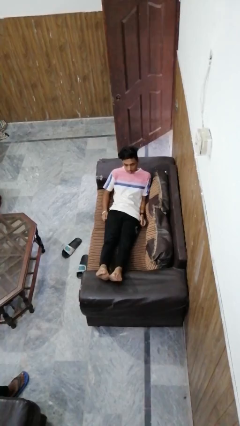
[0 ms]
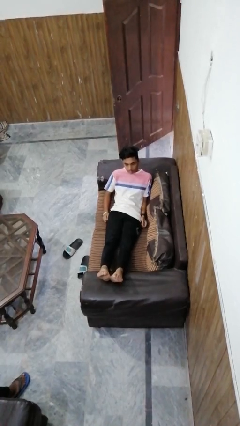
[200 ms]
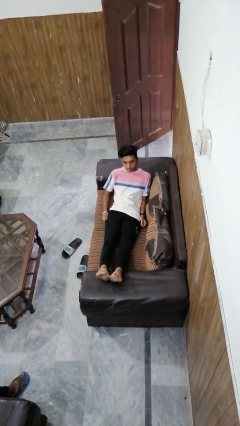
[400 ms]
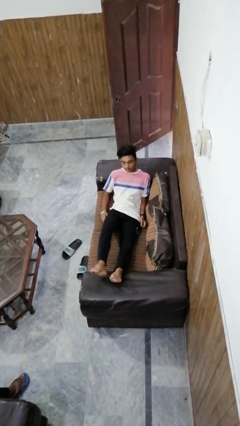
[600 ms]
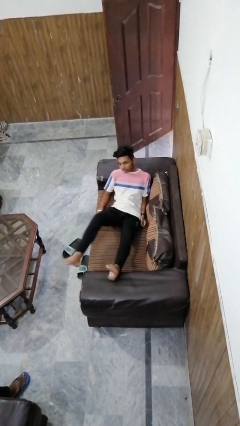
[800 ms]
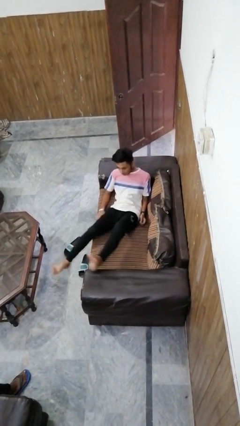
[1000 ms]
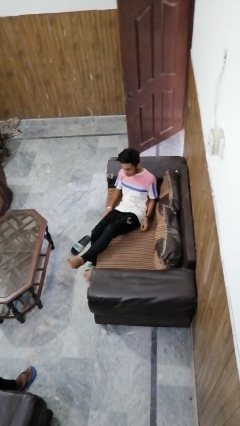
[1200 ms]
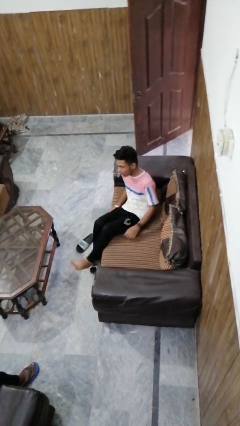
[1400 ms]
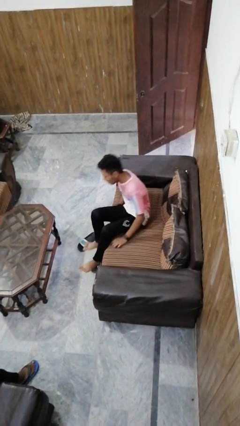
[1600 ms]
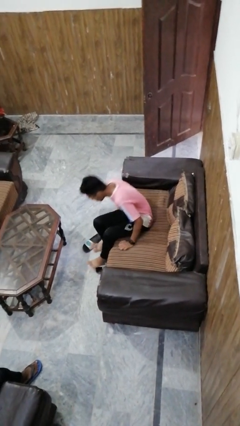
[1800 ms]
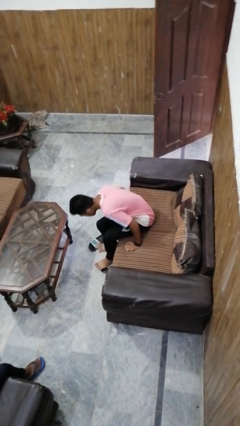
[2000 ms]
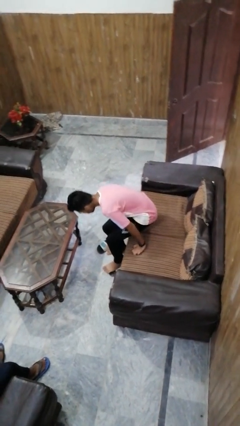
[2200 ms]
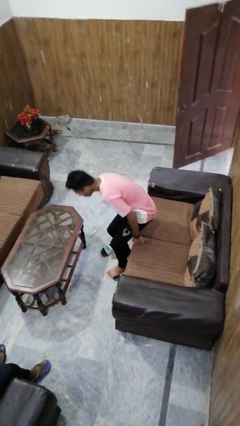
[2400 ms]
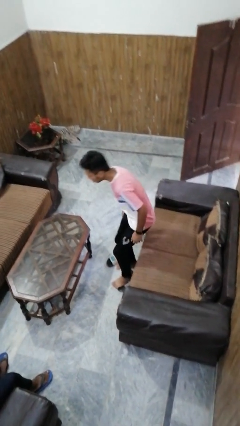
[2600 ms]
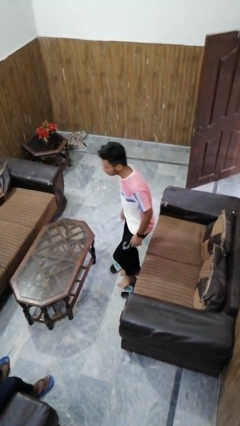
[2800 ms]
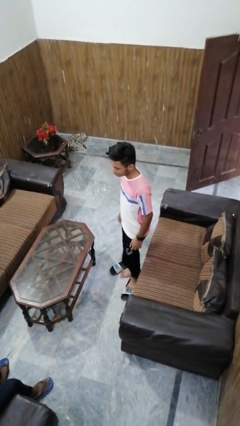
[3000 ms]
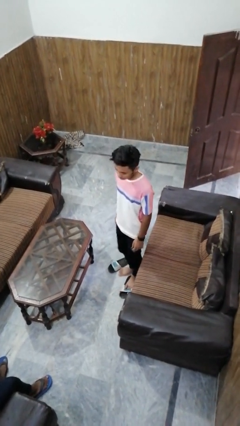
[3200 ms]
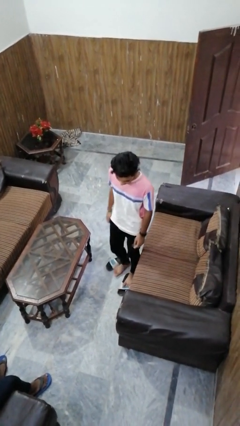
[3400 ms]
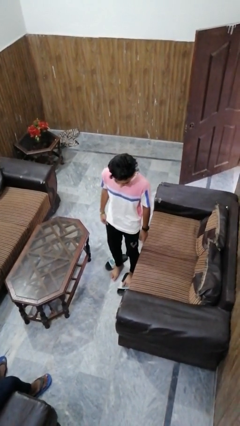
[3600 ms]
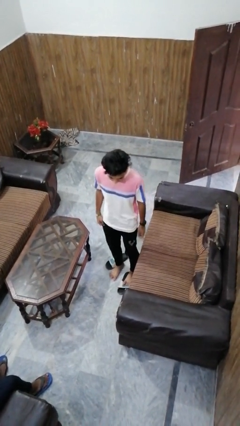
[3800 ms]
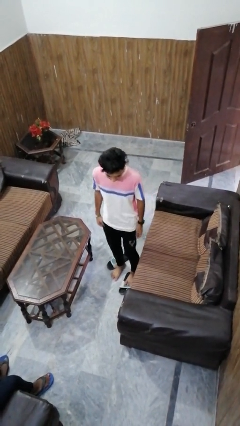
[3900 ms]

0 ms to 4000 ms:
person stands up

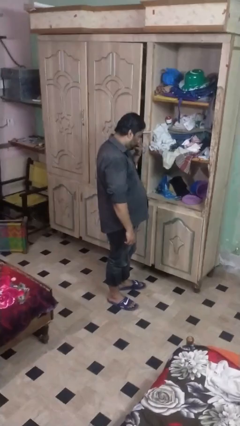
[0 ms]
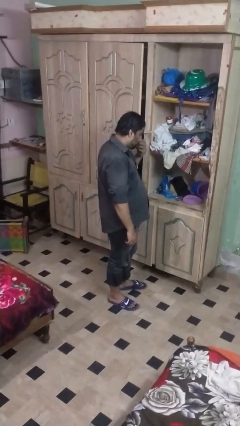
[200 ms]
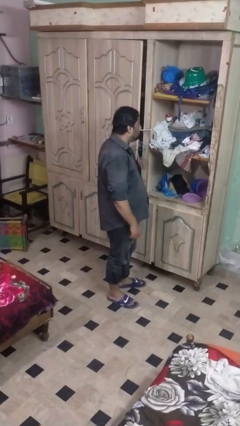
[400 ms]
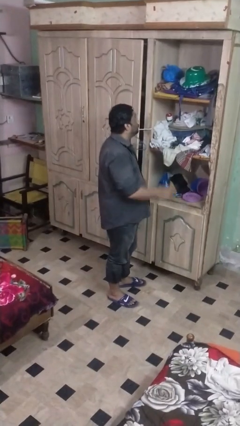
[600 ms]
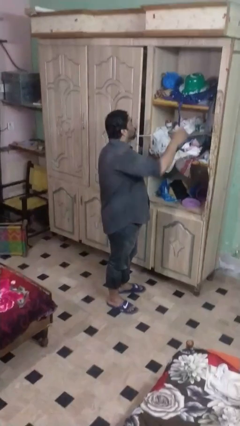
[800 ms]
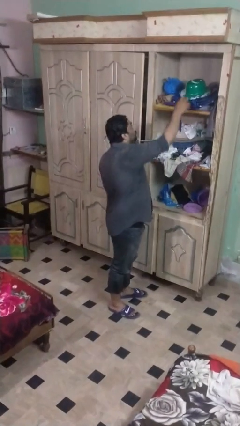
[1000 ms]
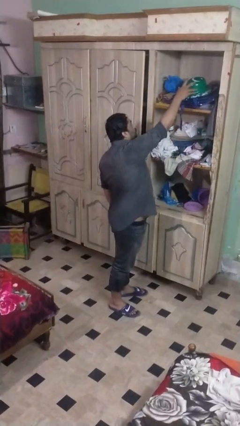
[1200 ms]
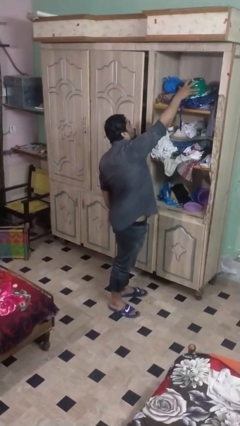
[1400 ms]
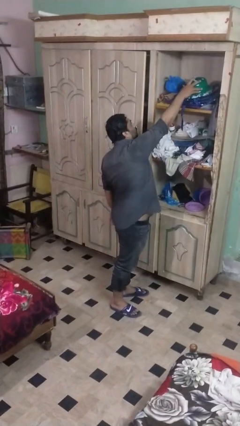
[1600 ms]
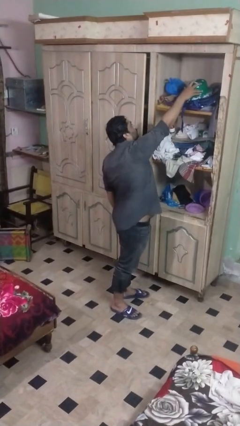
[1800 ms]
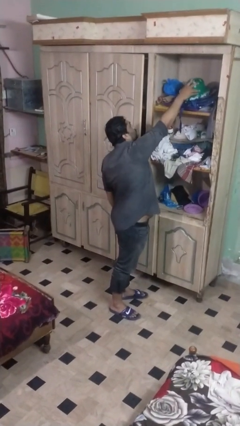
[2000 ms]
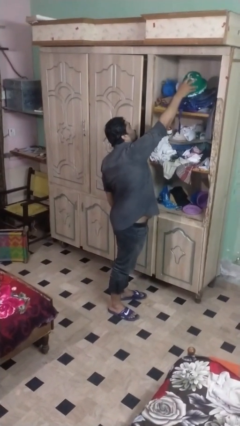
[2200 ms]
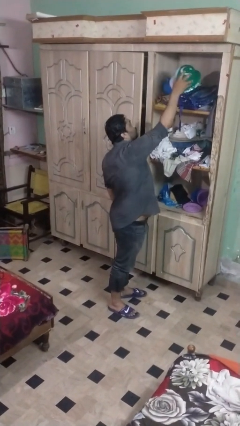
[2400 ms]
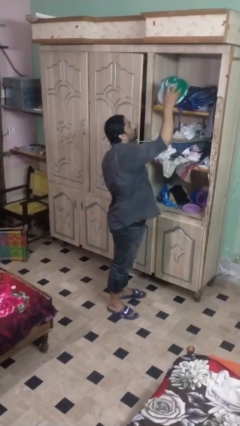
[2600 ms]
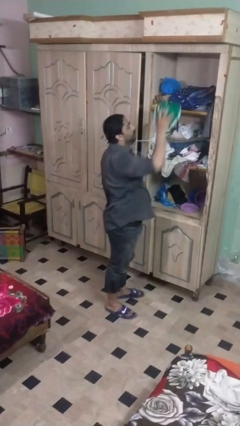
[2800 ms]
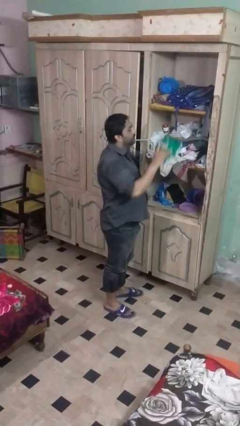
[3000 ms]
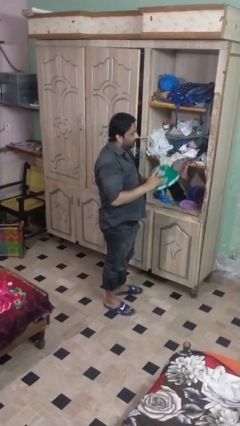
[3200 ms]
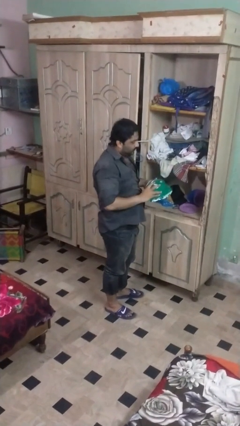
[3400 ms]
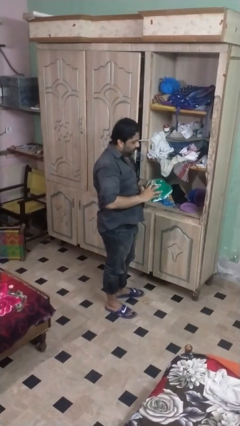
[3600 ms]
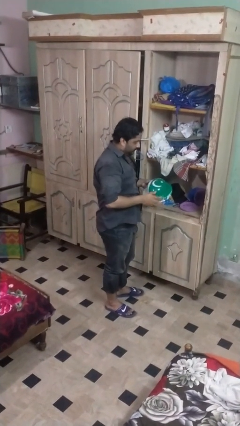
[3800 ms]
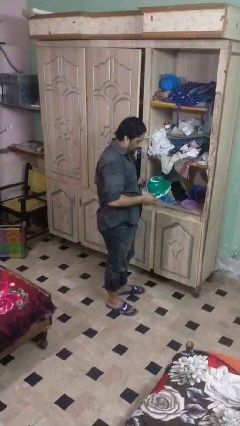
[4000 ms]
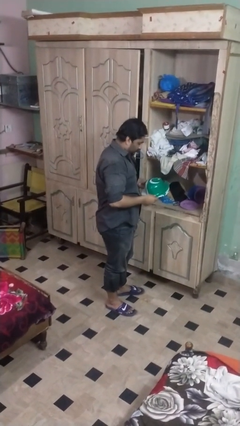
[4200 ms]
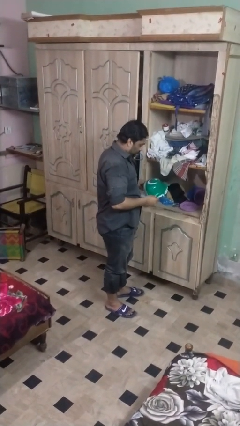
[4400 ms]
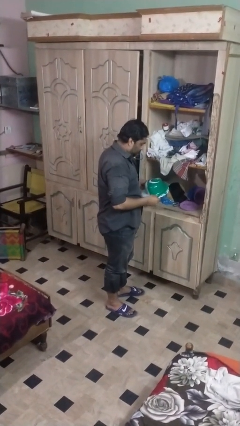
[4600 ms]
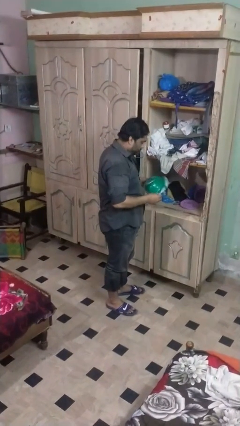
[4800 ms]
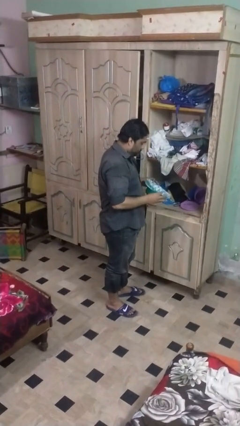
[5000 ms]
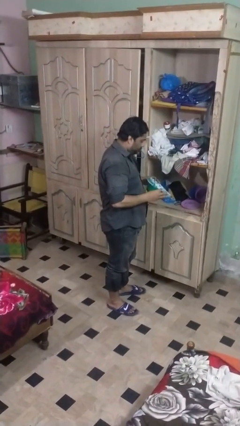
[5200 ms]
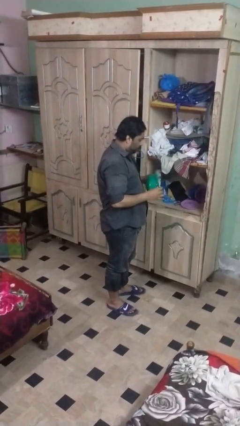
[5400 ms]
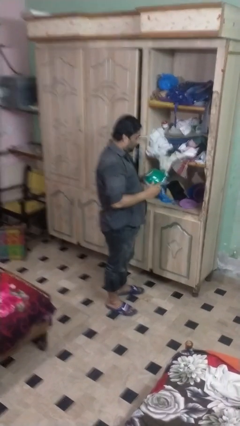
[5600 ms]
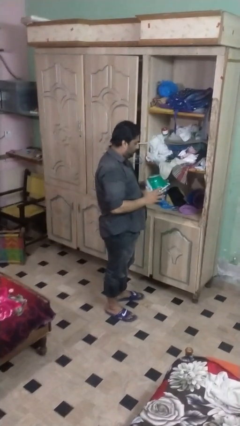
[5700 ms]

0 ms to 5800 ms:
person picks up object from shelf

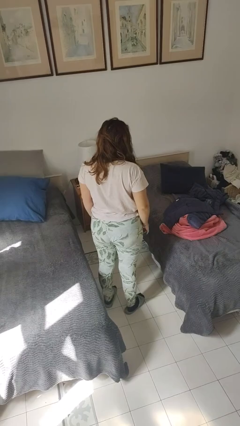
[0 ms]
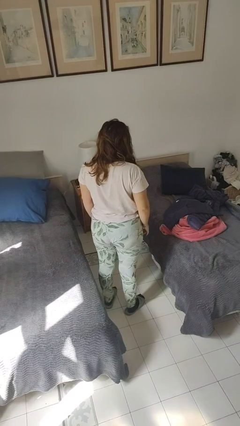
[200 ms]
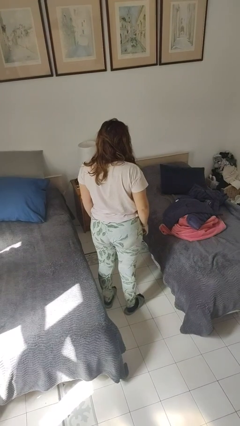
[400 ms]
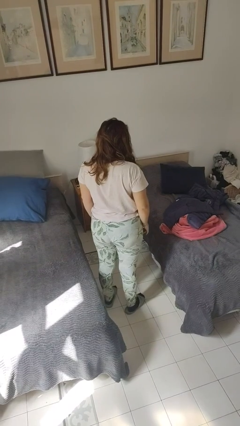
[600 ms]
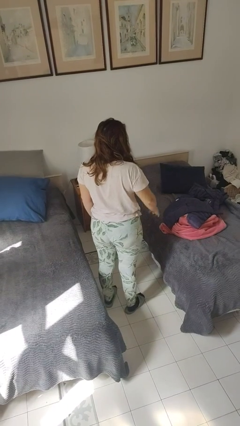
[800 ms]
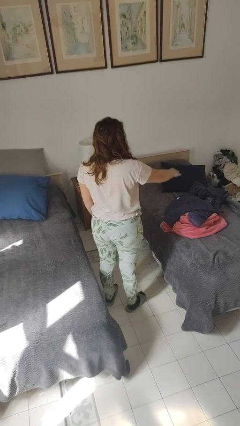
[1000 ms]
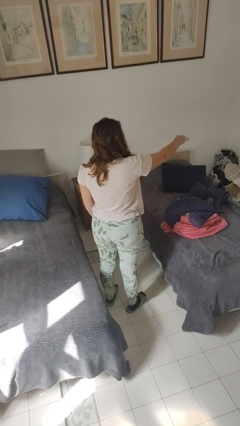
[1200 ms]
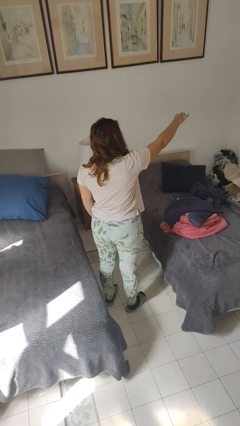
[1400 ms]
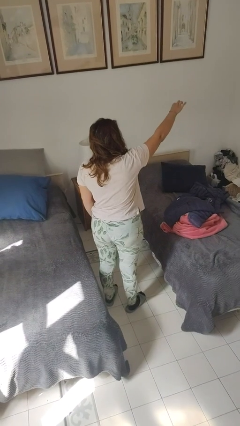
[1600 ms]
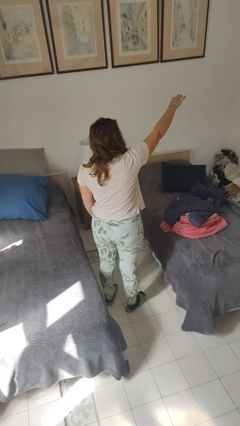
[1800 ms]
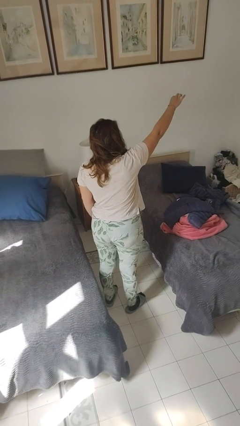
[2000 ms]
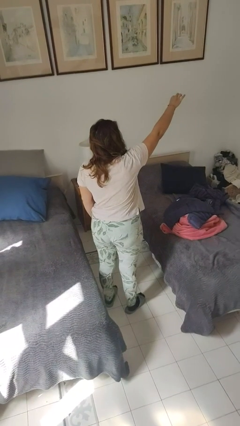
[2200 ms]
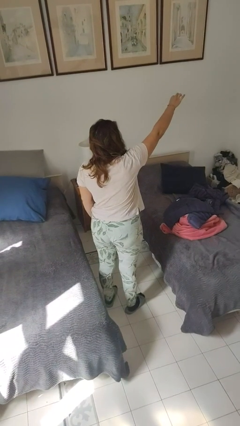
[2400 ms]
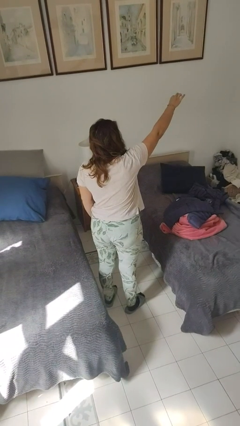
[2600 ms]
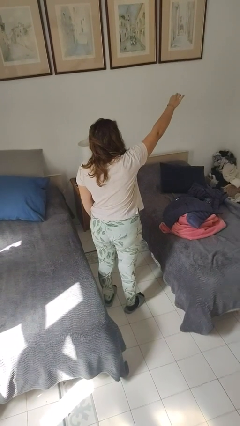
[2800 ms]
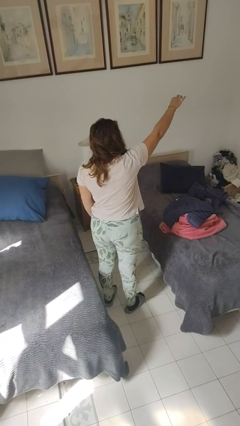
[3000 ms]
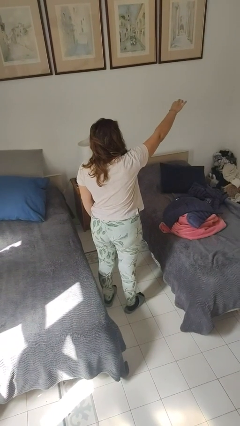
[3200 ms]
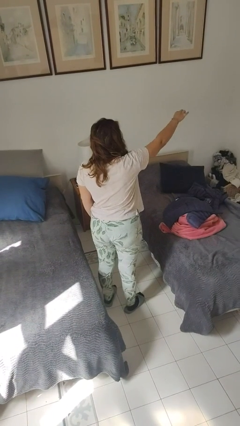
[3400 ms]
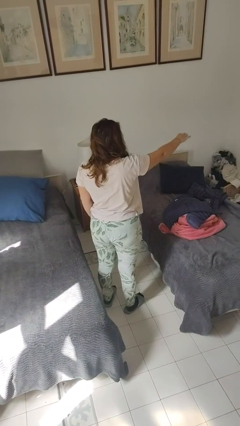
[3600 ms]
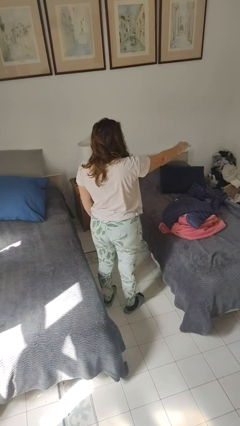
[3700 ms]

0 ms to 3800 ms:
person gestures hang loose

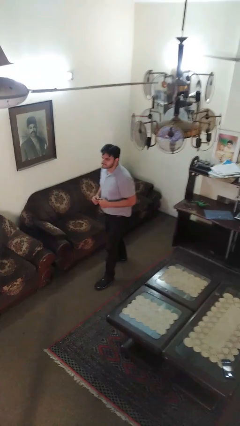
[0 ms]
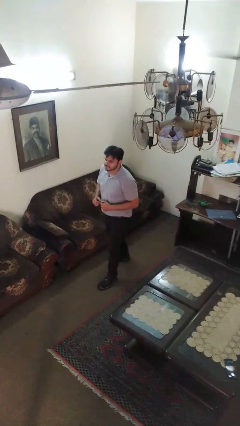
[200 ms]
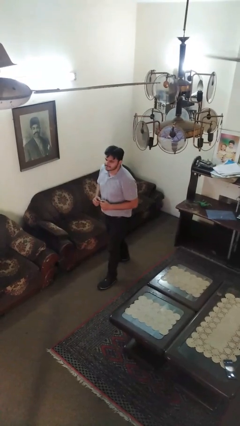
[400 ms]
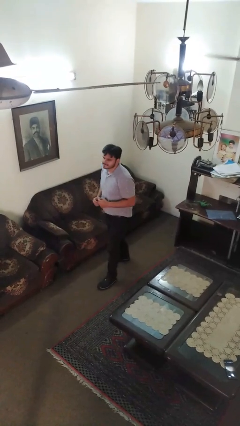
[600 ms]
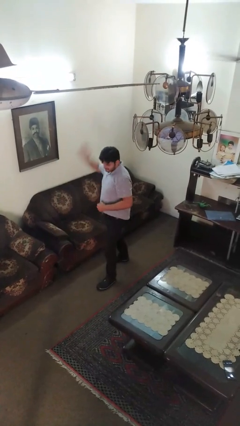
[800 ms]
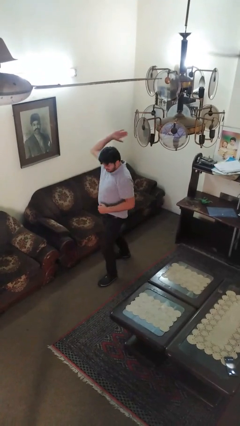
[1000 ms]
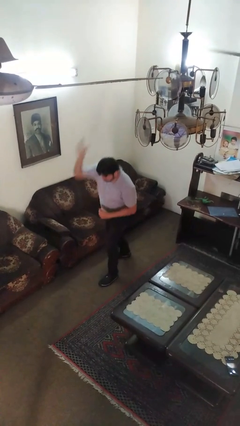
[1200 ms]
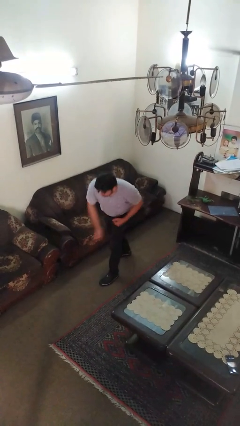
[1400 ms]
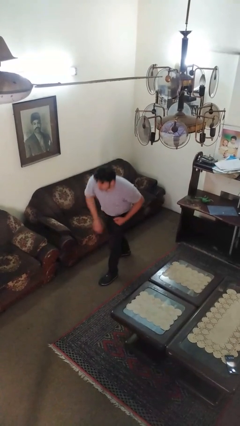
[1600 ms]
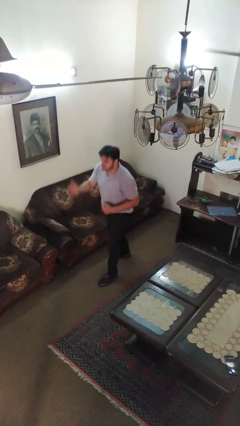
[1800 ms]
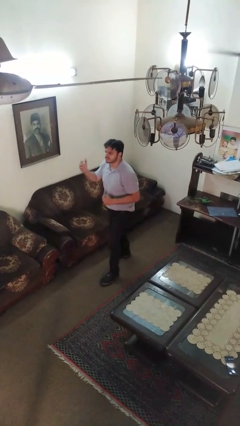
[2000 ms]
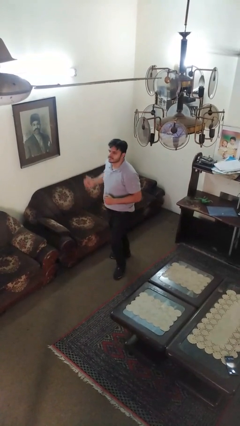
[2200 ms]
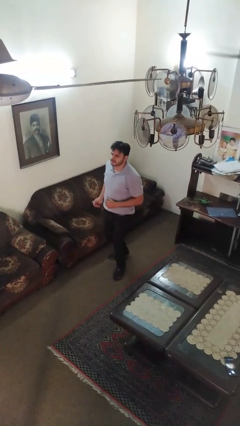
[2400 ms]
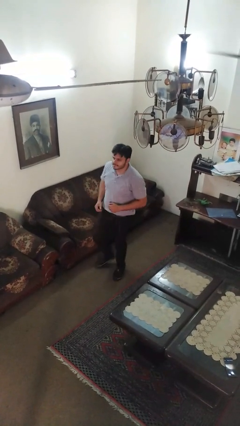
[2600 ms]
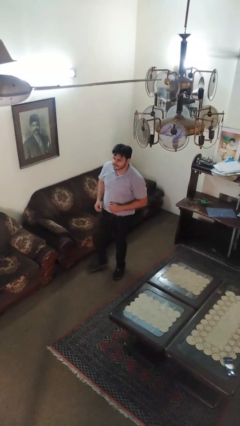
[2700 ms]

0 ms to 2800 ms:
person karate chop

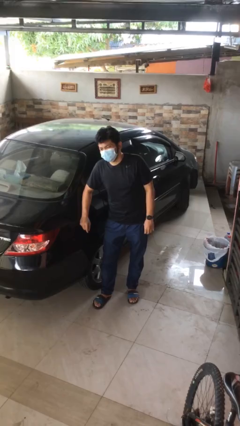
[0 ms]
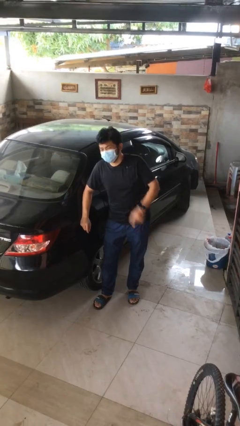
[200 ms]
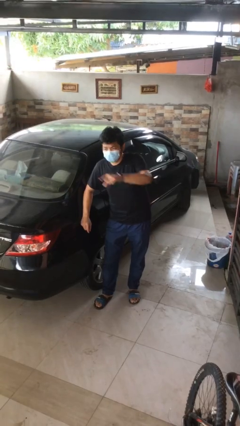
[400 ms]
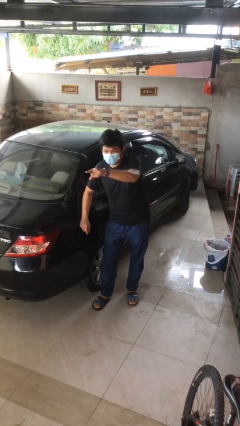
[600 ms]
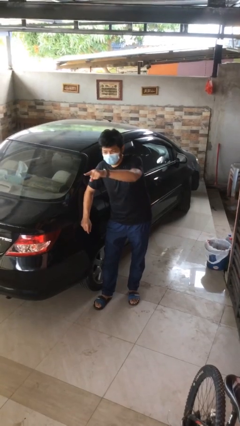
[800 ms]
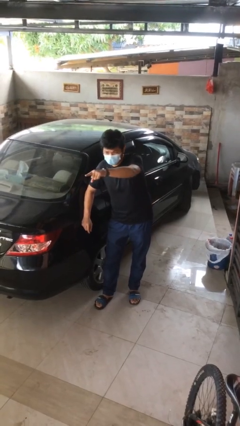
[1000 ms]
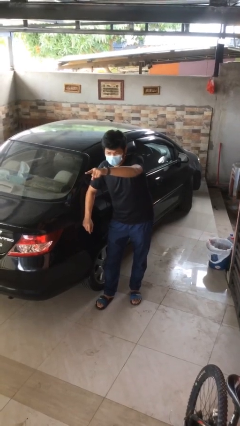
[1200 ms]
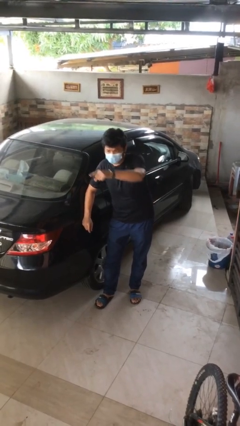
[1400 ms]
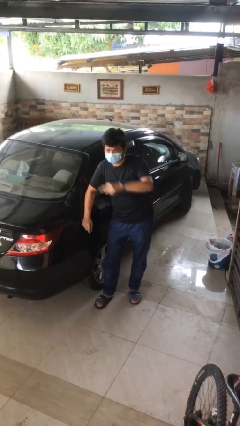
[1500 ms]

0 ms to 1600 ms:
person points at person
